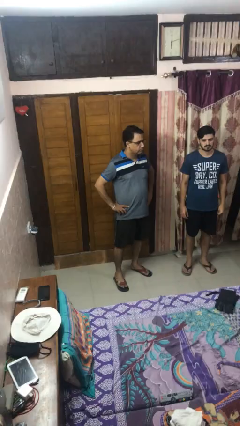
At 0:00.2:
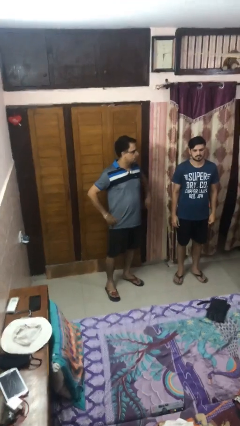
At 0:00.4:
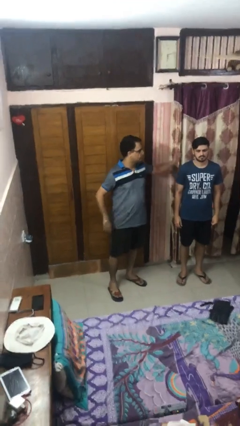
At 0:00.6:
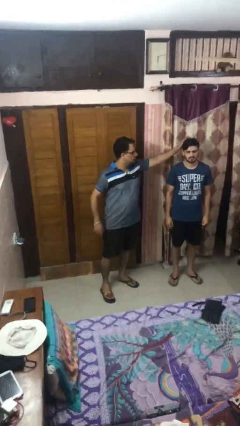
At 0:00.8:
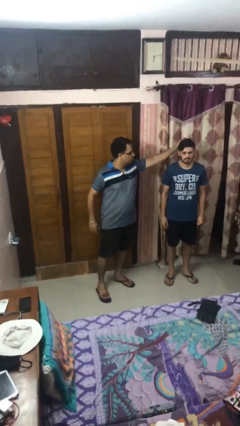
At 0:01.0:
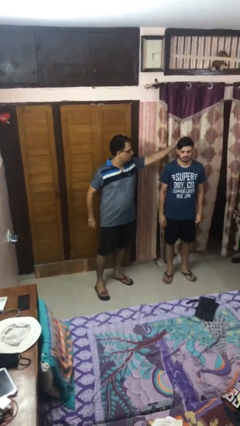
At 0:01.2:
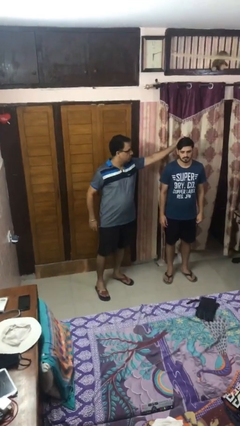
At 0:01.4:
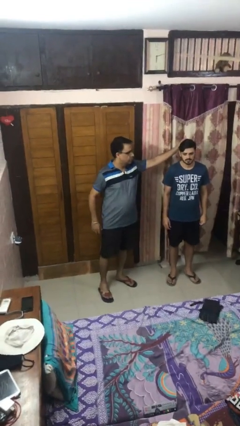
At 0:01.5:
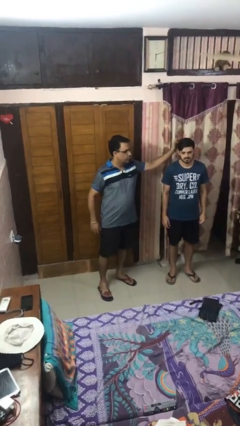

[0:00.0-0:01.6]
person grabs person by hair

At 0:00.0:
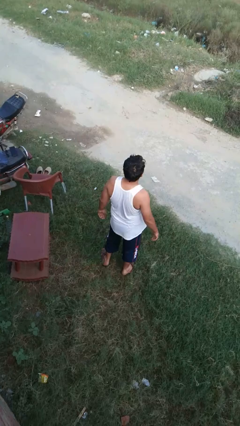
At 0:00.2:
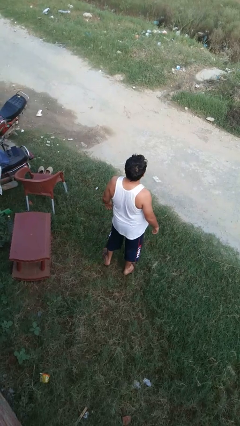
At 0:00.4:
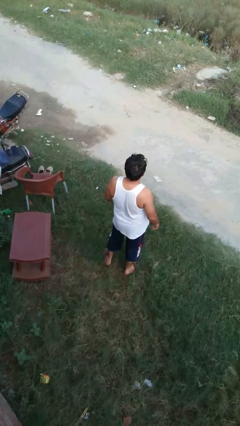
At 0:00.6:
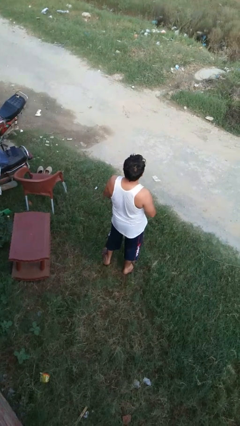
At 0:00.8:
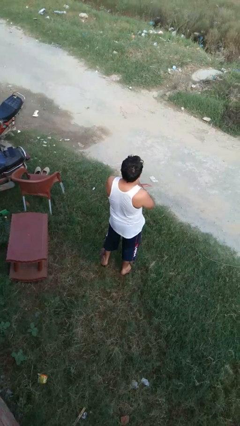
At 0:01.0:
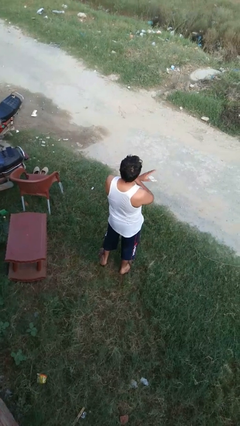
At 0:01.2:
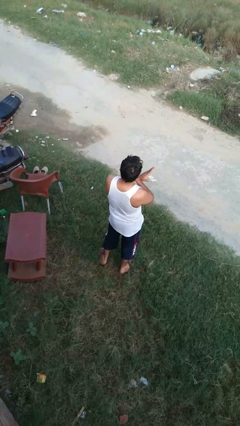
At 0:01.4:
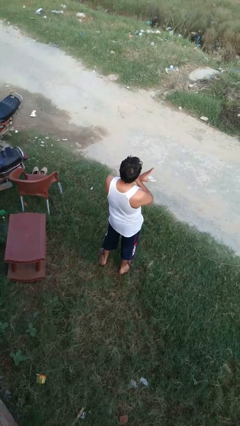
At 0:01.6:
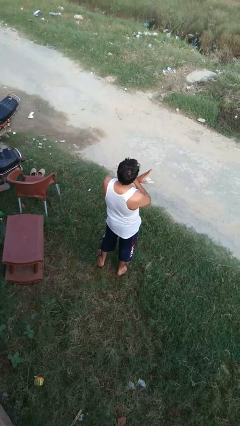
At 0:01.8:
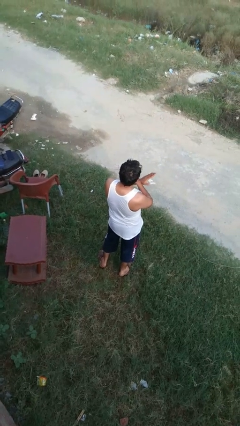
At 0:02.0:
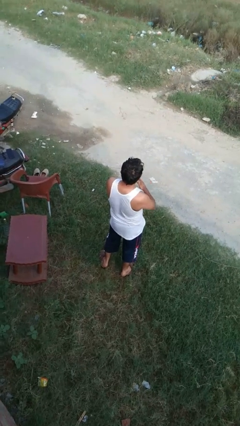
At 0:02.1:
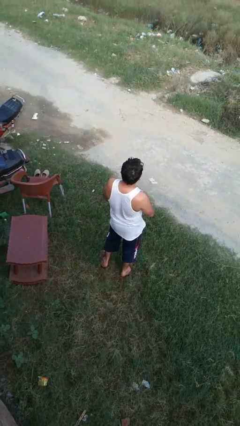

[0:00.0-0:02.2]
person karate chop

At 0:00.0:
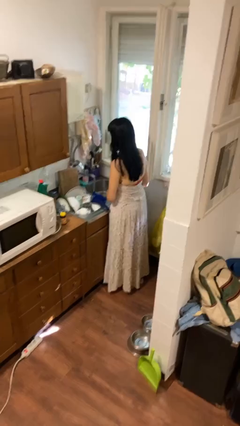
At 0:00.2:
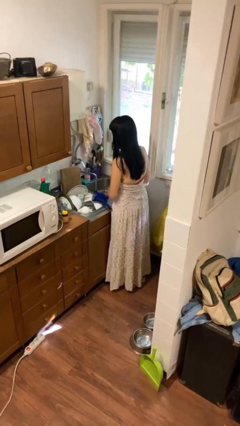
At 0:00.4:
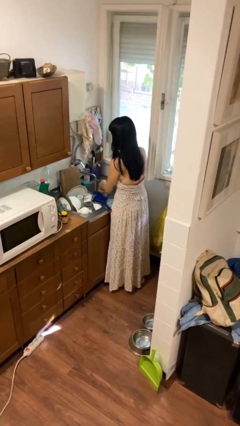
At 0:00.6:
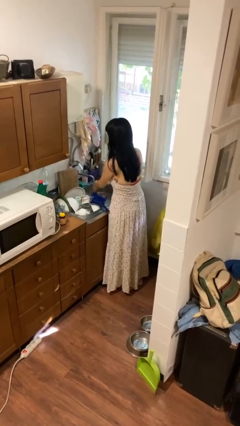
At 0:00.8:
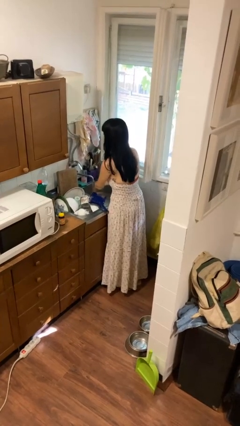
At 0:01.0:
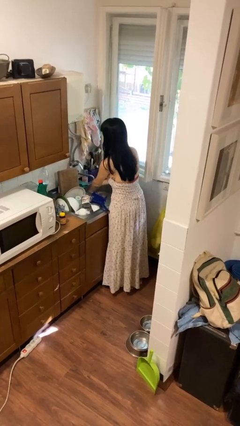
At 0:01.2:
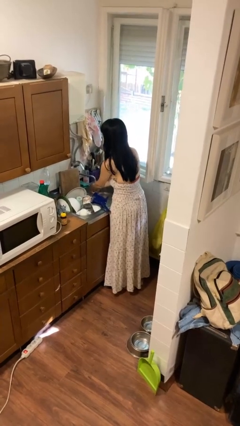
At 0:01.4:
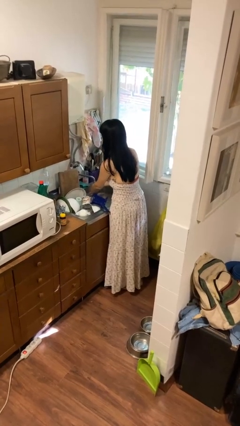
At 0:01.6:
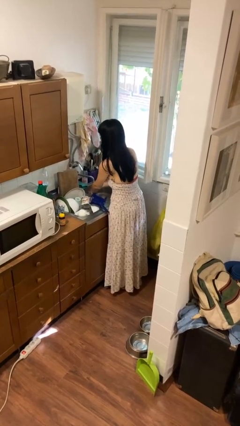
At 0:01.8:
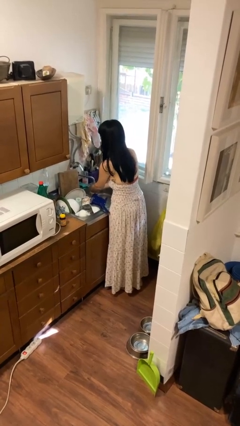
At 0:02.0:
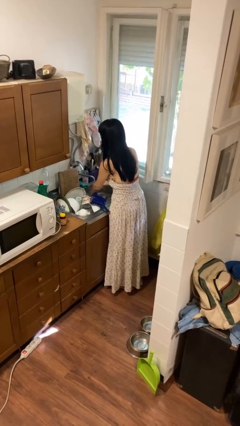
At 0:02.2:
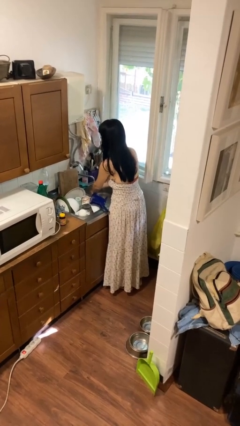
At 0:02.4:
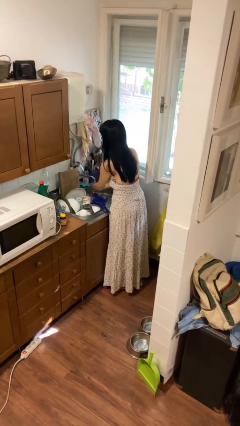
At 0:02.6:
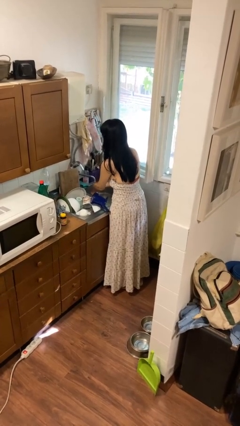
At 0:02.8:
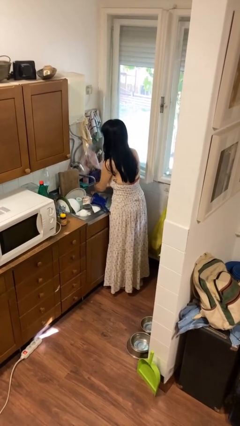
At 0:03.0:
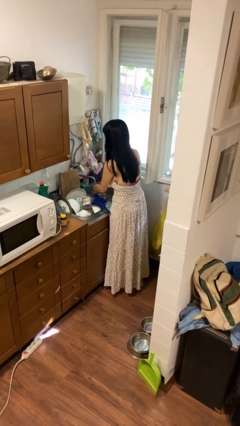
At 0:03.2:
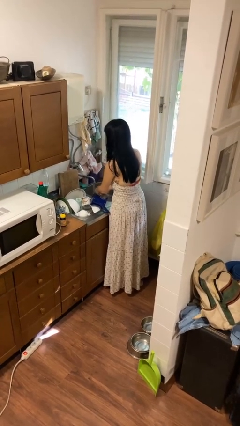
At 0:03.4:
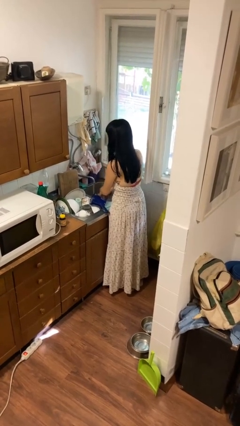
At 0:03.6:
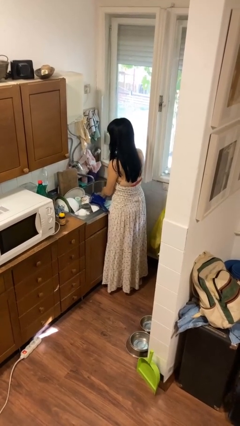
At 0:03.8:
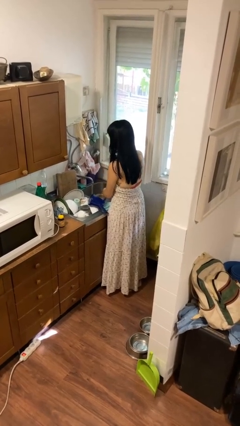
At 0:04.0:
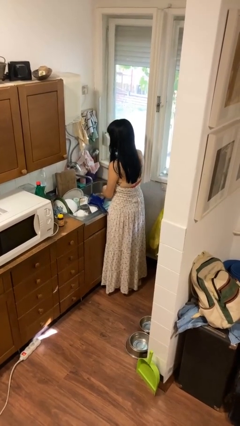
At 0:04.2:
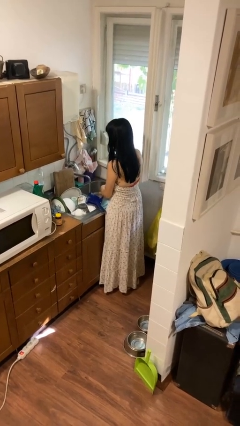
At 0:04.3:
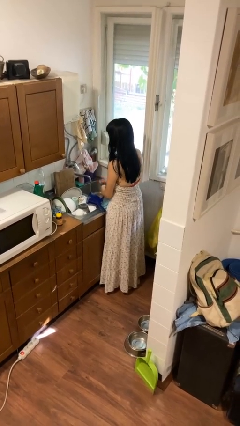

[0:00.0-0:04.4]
person washes hands

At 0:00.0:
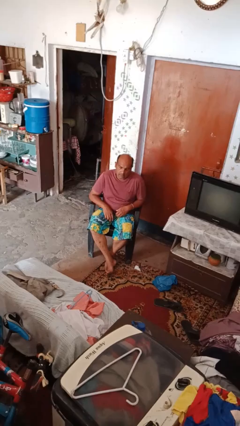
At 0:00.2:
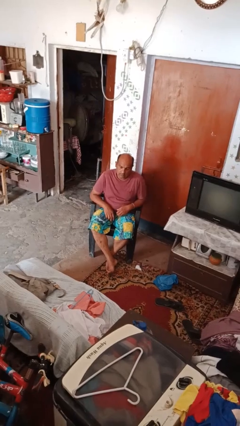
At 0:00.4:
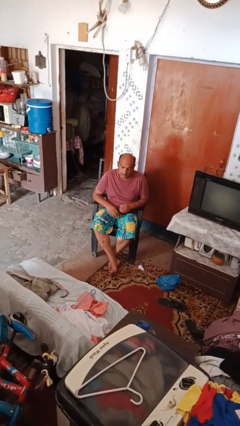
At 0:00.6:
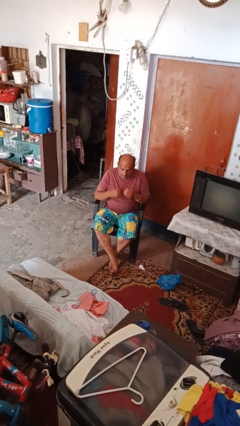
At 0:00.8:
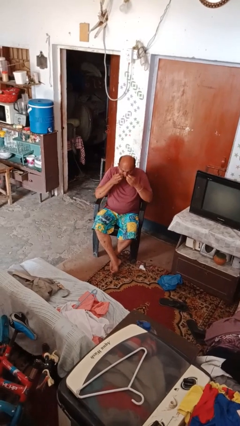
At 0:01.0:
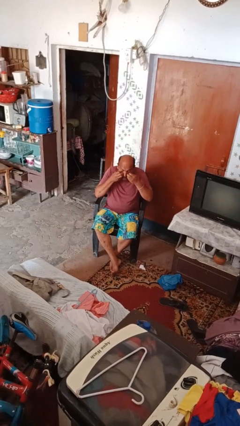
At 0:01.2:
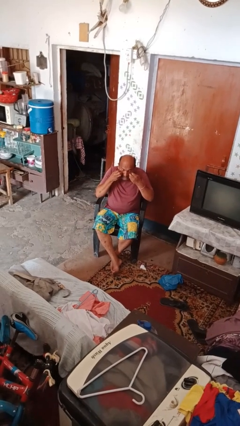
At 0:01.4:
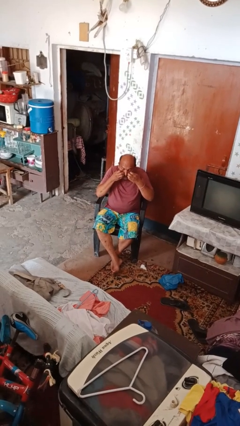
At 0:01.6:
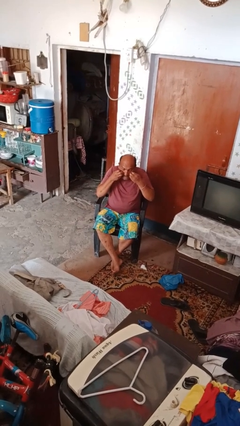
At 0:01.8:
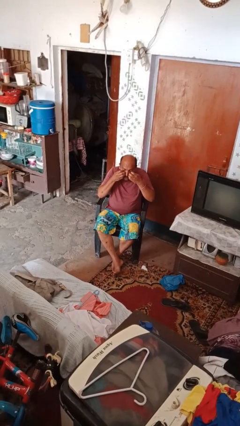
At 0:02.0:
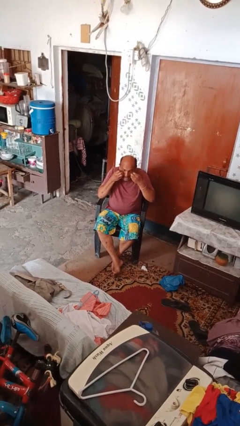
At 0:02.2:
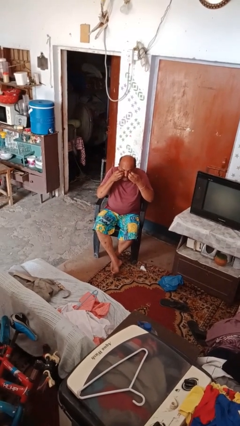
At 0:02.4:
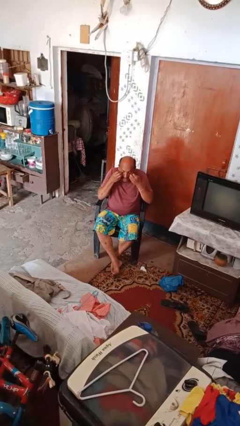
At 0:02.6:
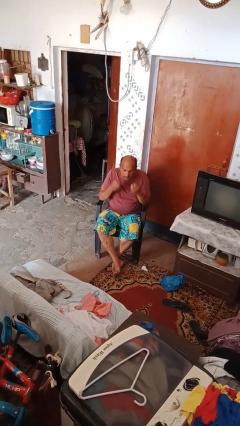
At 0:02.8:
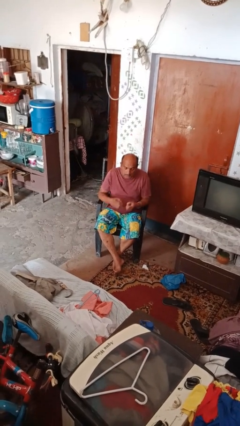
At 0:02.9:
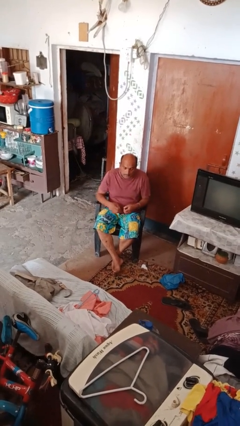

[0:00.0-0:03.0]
person scratches face

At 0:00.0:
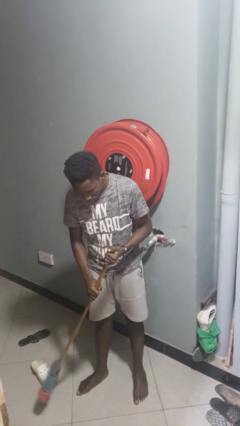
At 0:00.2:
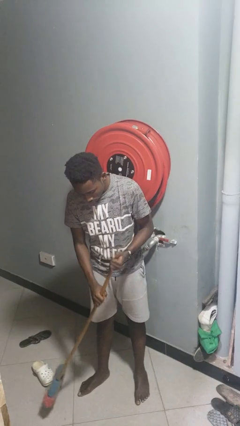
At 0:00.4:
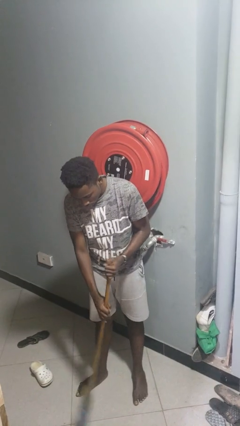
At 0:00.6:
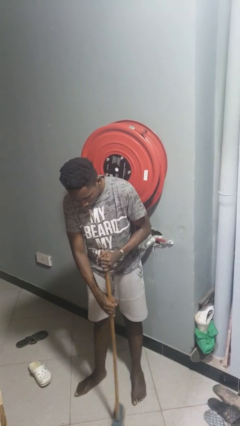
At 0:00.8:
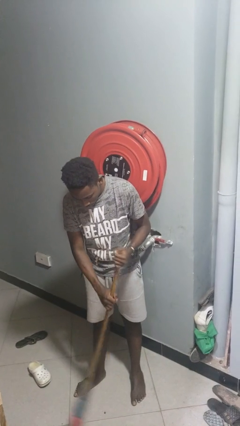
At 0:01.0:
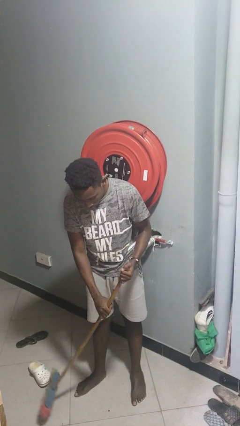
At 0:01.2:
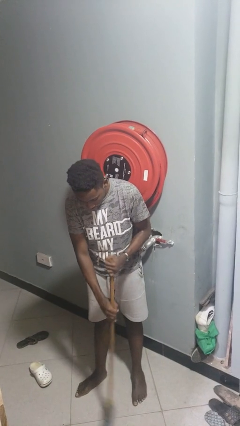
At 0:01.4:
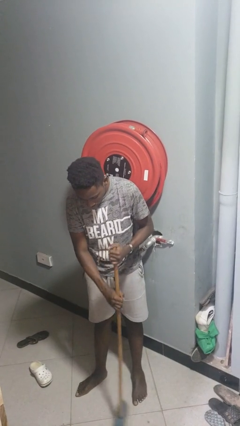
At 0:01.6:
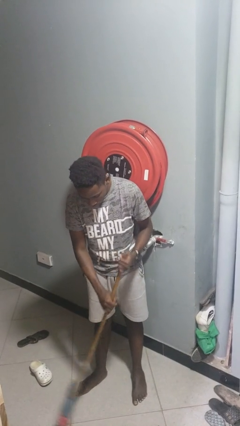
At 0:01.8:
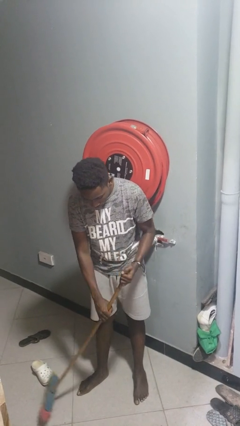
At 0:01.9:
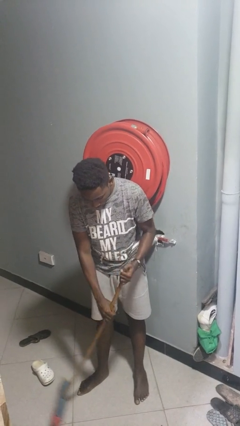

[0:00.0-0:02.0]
person sweeps floor

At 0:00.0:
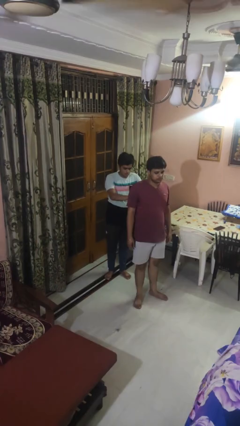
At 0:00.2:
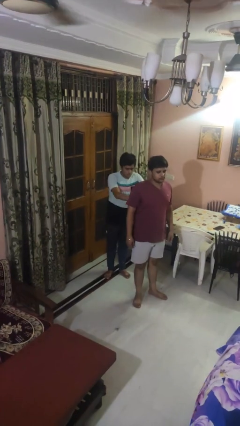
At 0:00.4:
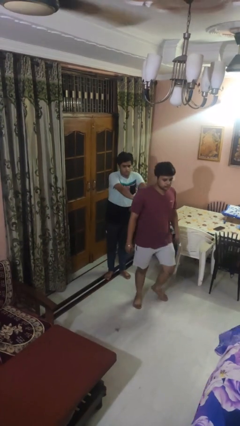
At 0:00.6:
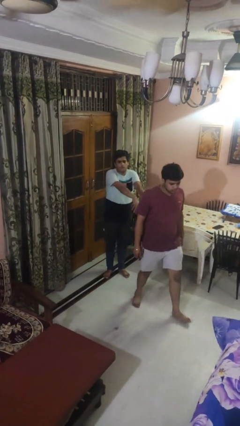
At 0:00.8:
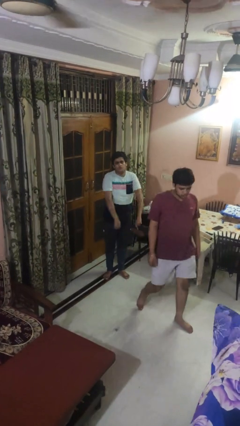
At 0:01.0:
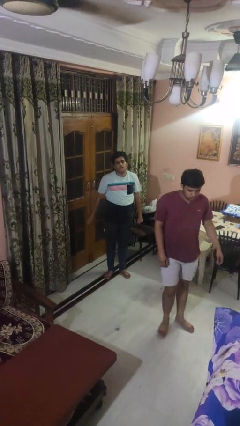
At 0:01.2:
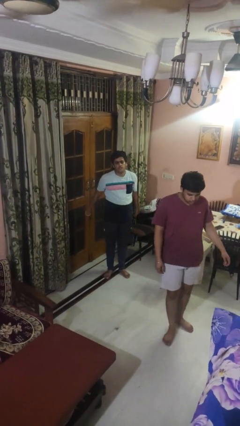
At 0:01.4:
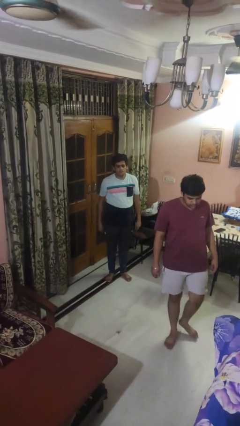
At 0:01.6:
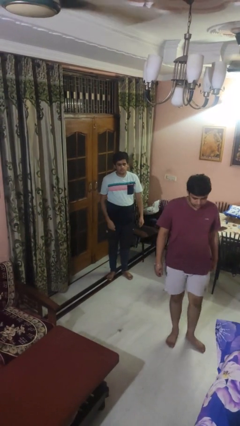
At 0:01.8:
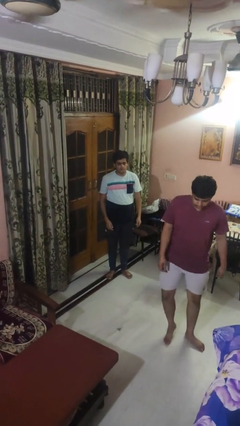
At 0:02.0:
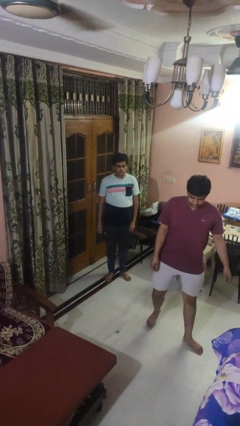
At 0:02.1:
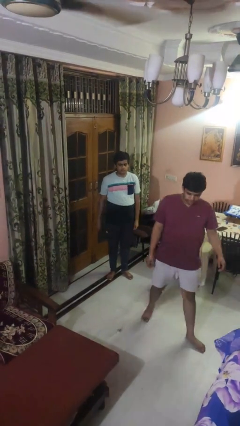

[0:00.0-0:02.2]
person shoves person

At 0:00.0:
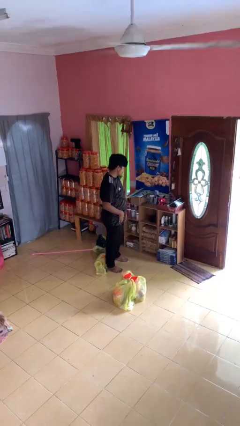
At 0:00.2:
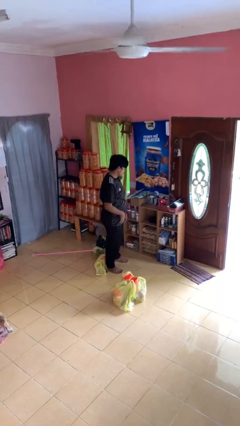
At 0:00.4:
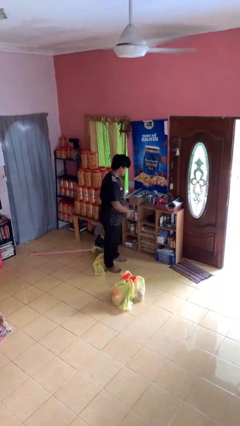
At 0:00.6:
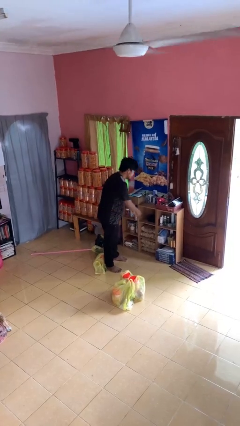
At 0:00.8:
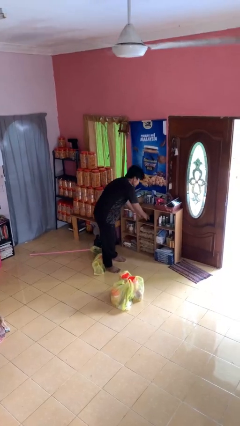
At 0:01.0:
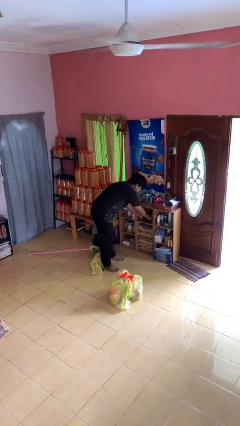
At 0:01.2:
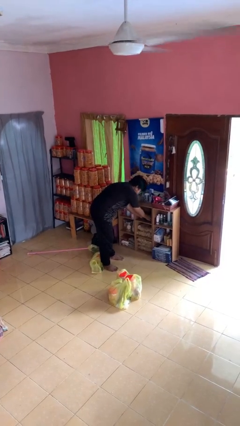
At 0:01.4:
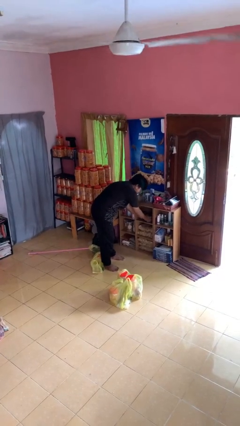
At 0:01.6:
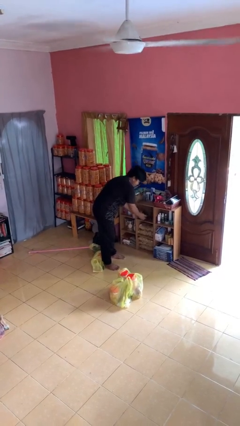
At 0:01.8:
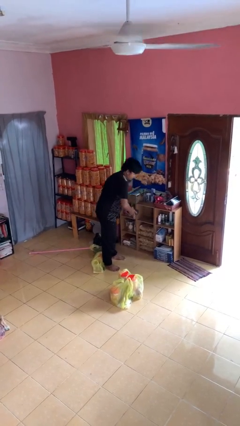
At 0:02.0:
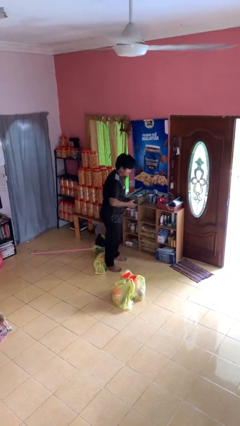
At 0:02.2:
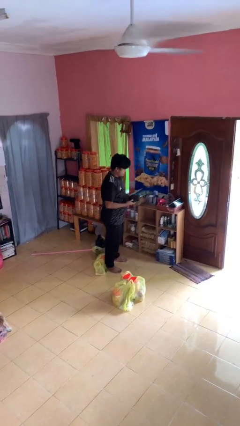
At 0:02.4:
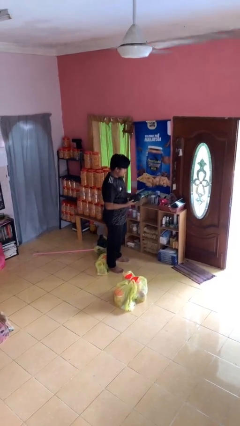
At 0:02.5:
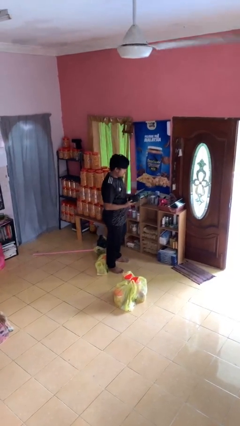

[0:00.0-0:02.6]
person takes object from cabinet
